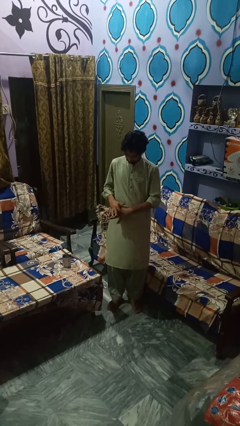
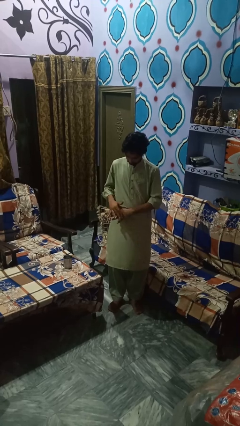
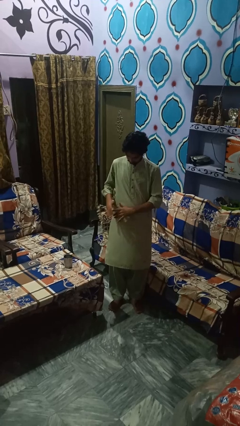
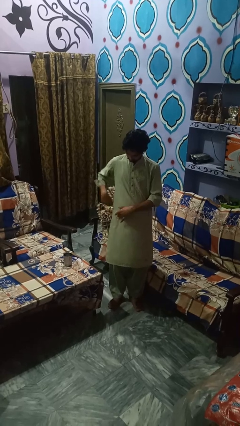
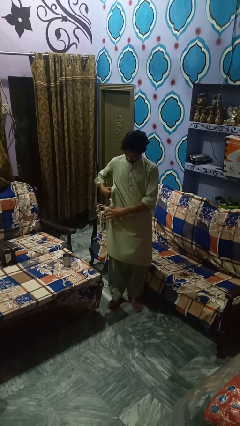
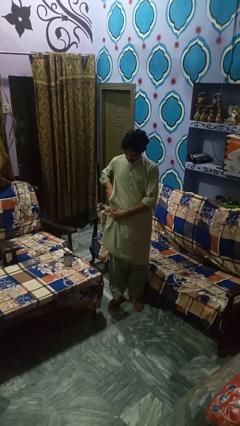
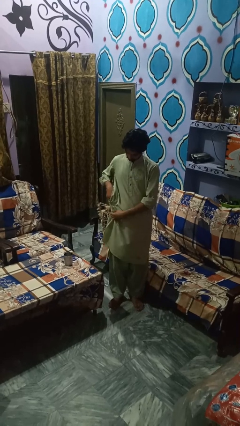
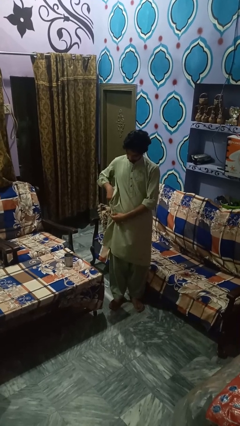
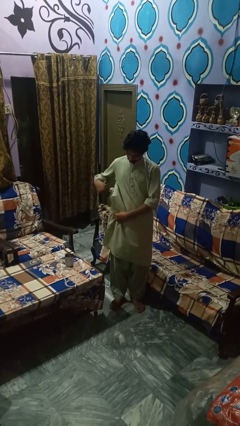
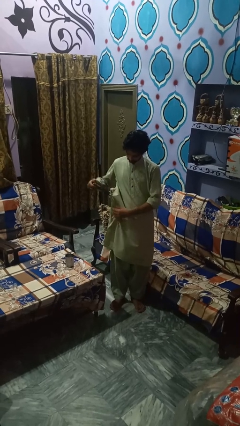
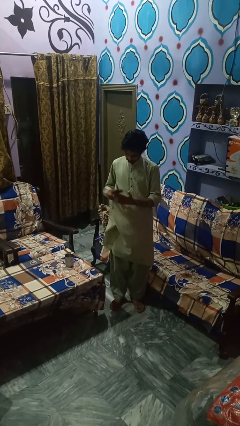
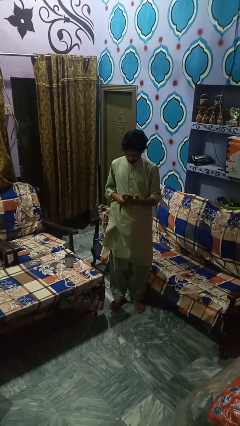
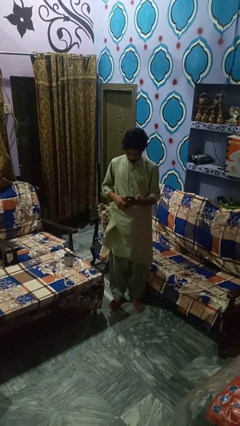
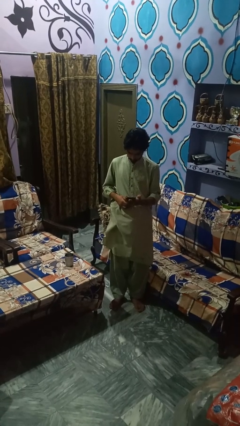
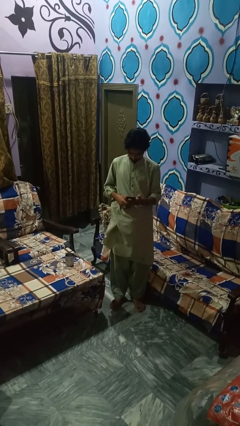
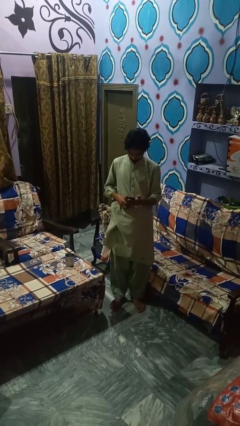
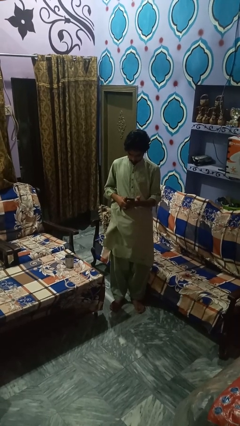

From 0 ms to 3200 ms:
person takes phone from pocket

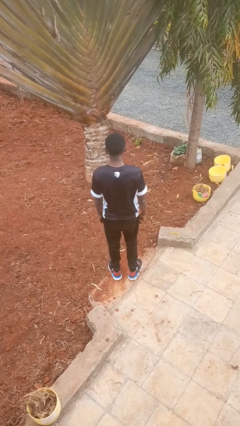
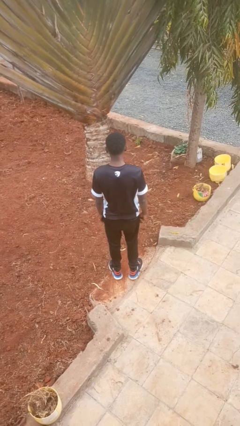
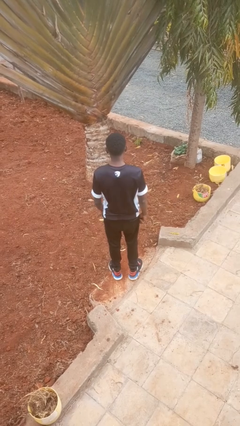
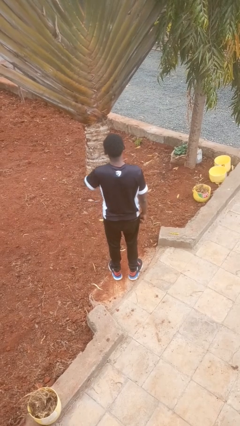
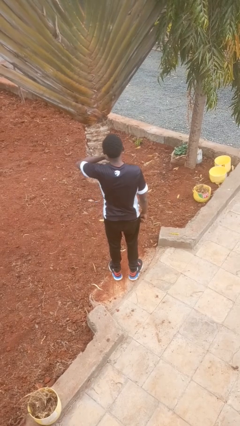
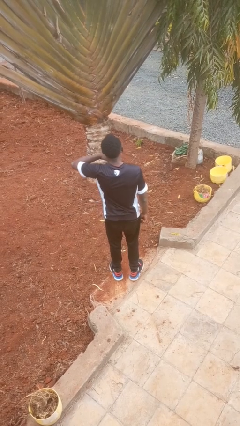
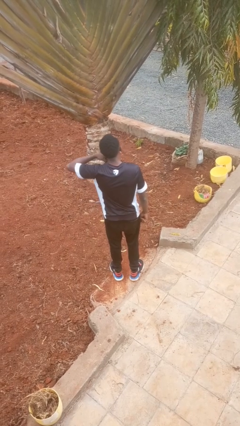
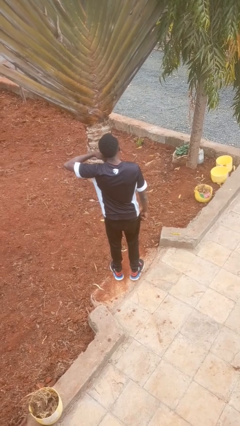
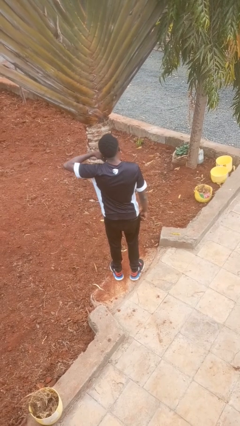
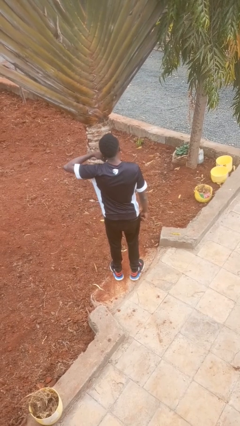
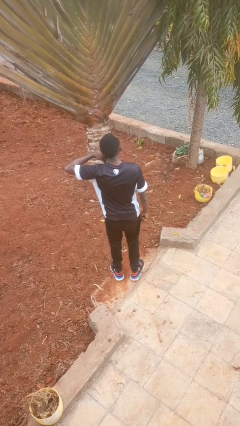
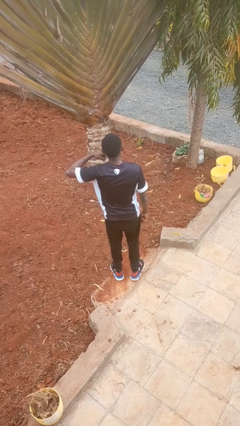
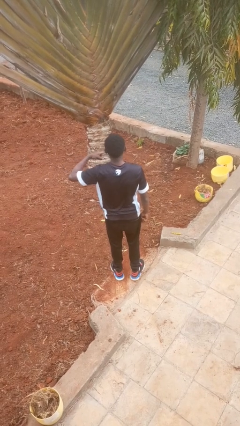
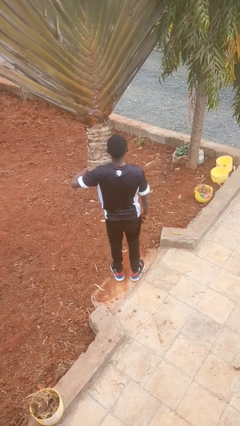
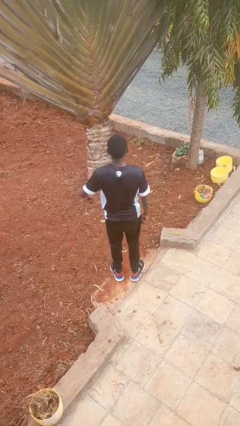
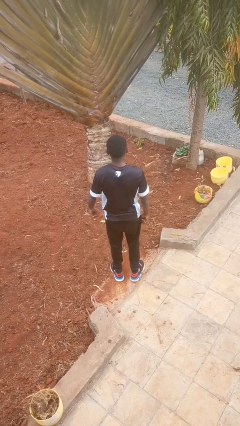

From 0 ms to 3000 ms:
person gestures cut

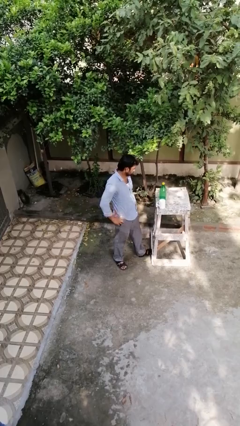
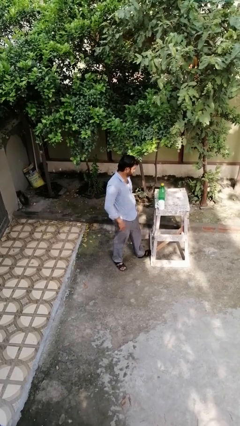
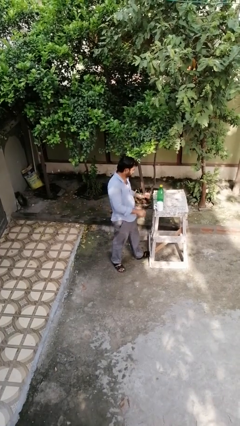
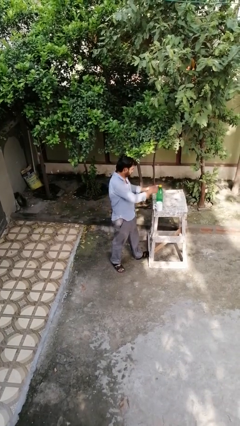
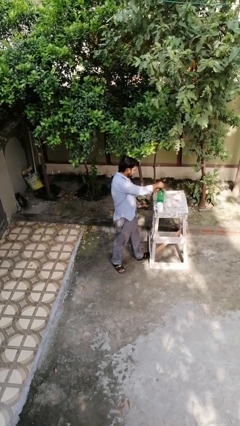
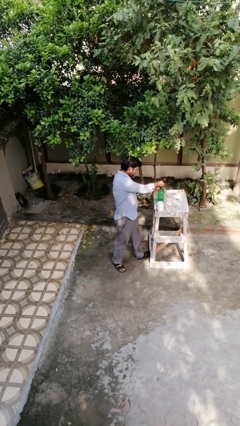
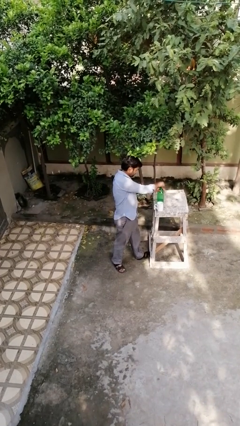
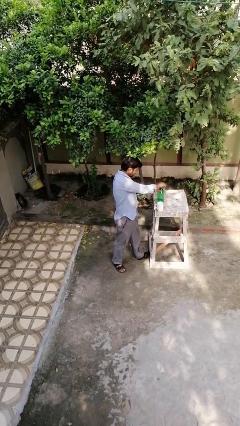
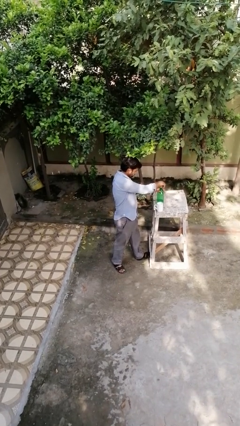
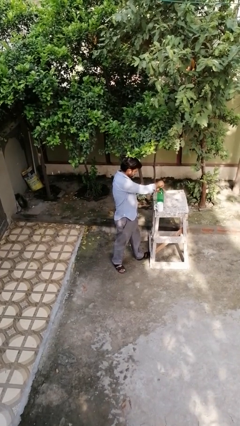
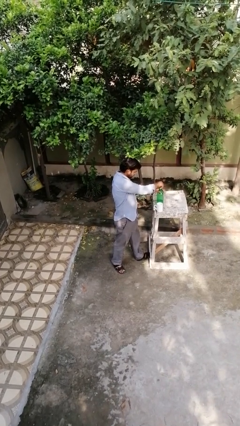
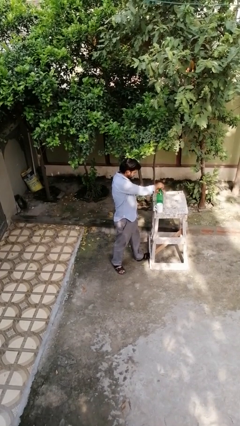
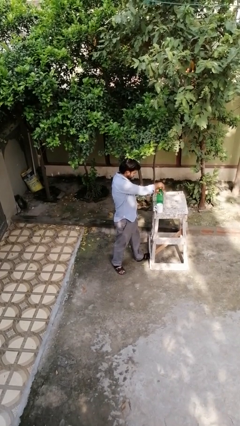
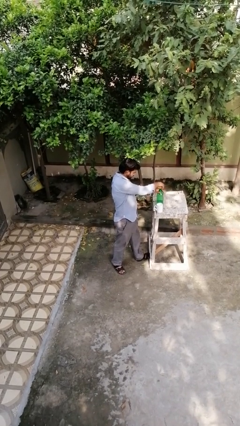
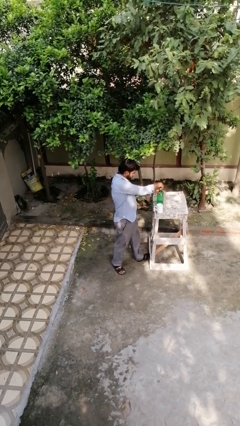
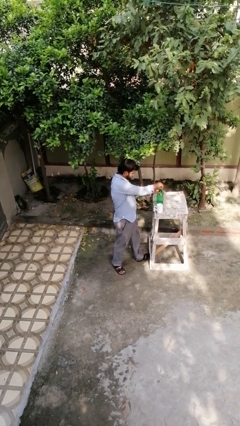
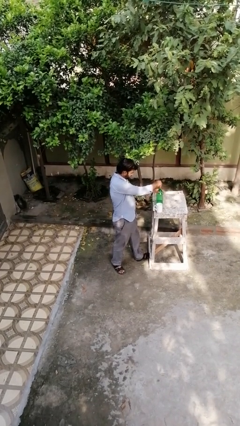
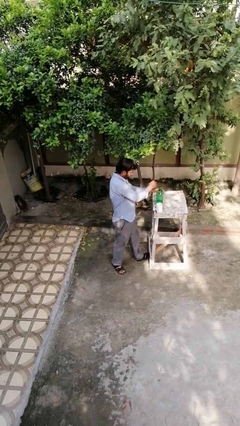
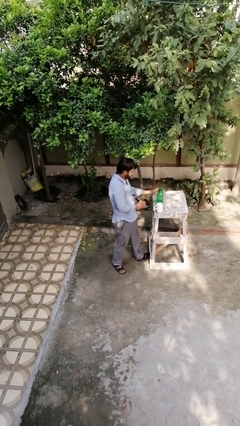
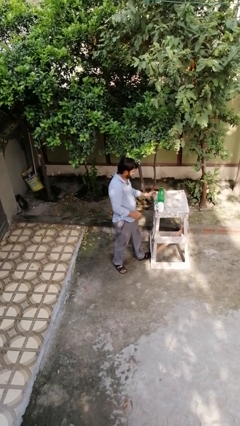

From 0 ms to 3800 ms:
person unscrews lid from bottle

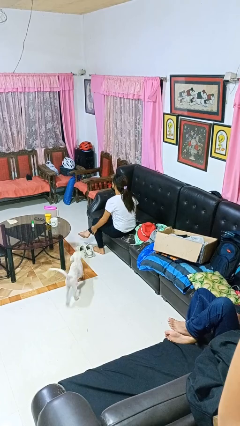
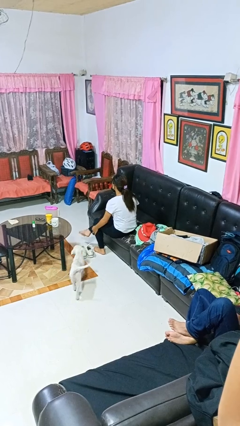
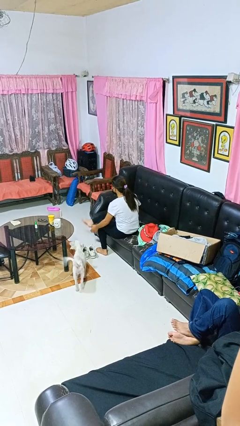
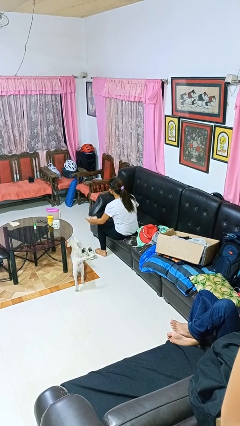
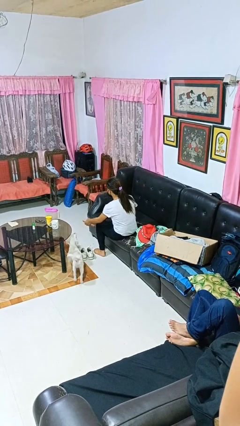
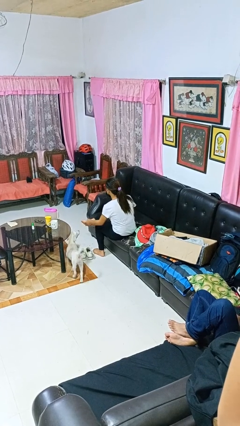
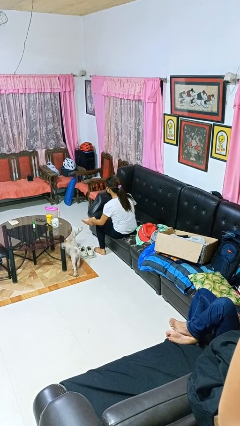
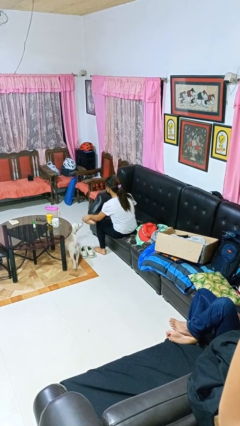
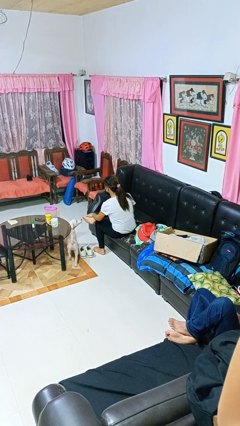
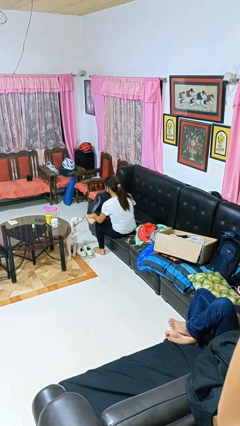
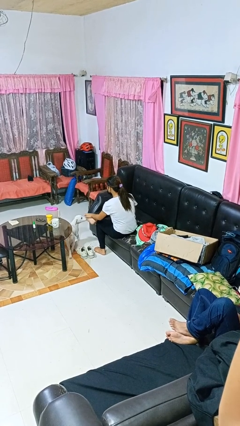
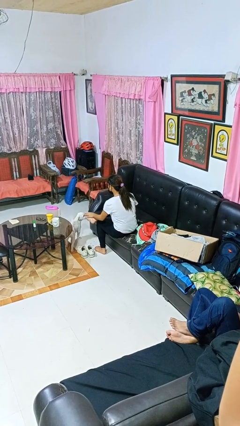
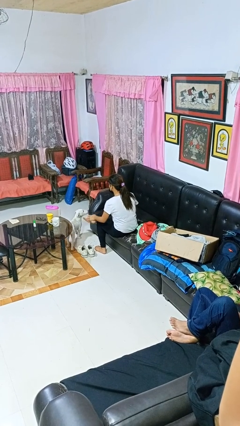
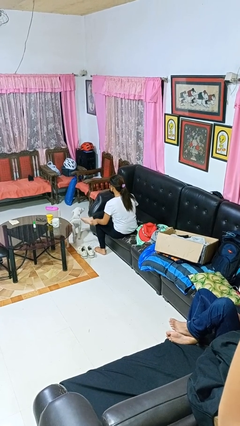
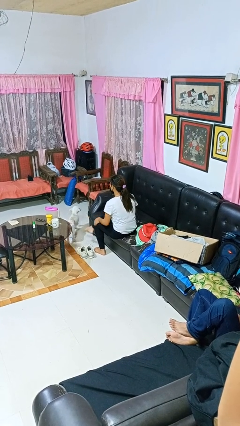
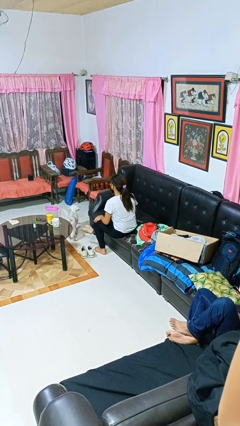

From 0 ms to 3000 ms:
person rubs foot

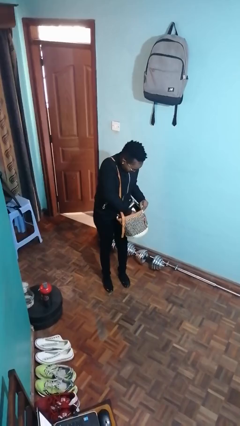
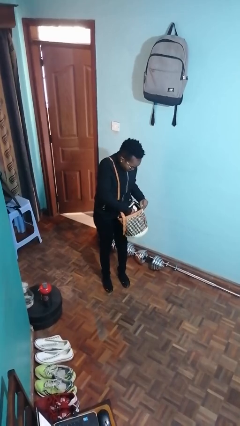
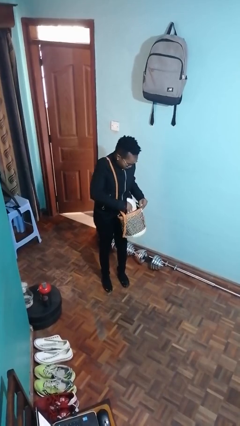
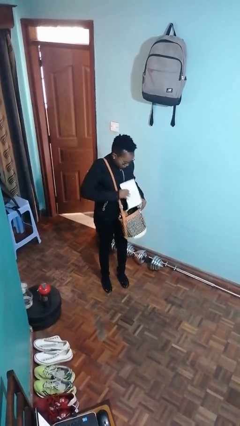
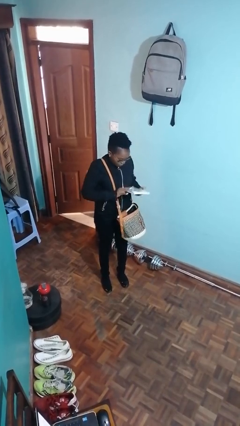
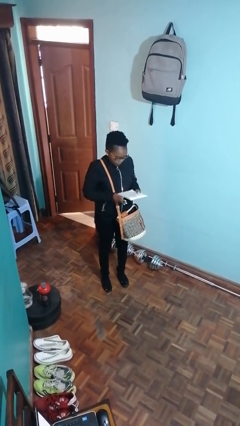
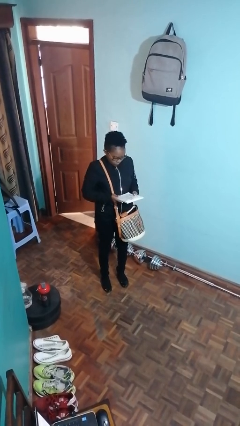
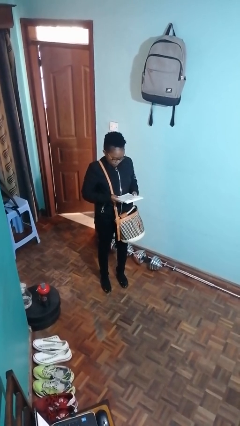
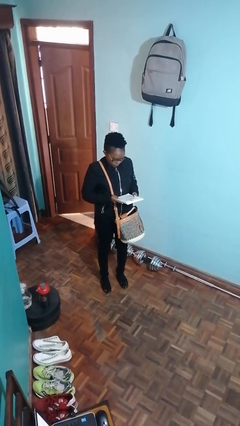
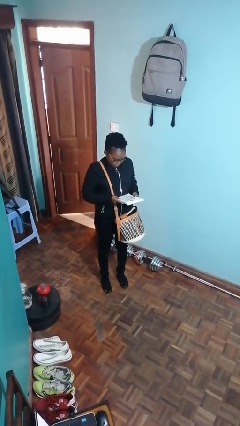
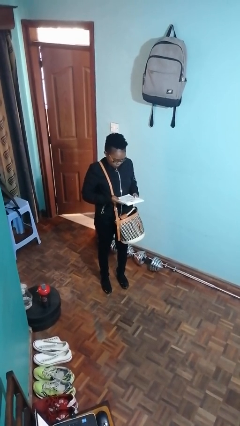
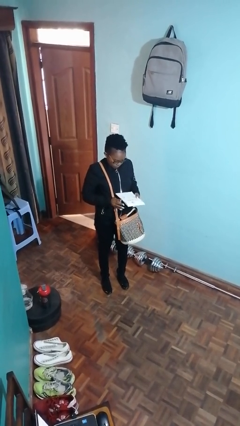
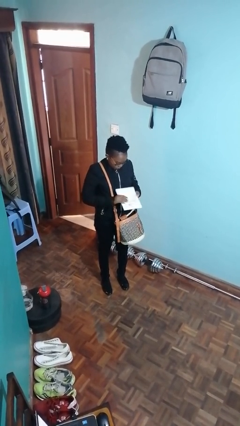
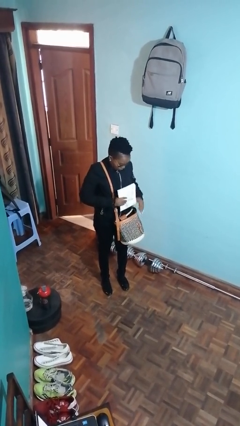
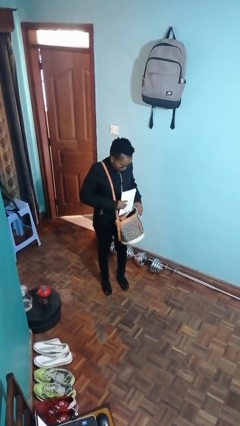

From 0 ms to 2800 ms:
person takes object from purse

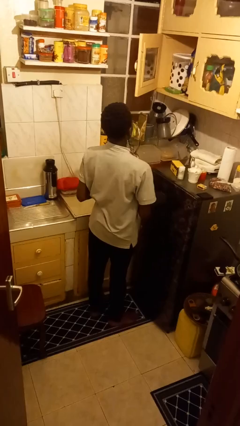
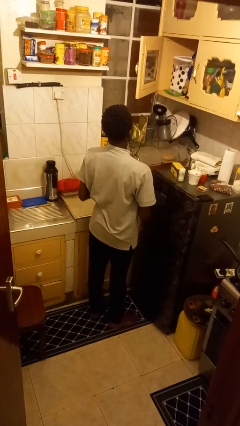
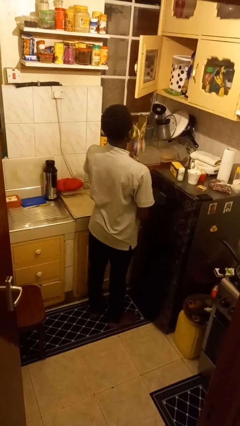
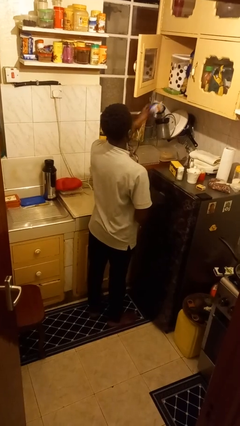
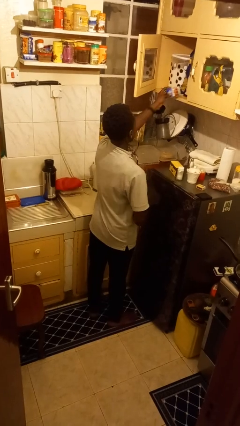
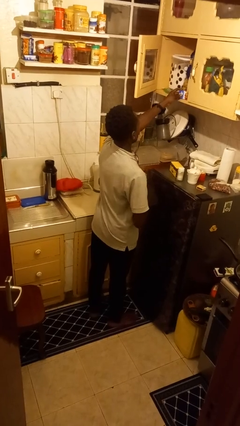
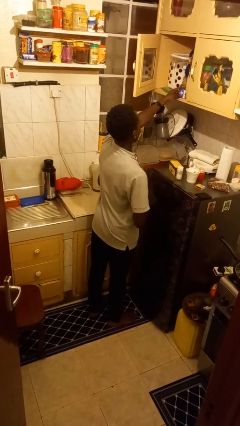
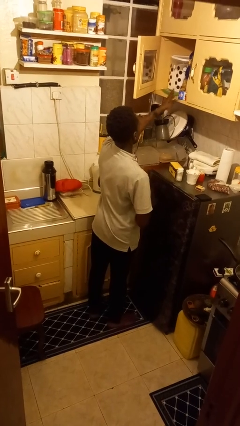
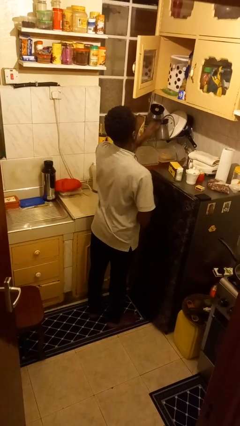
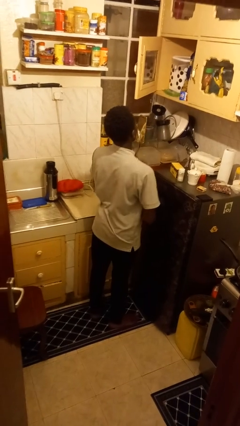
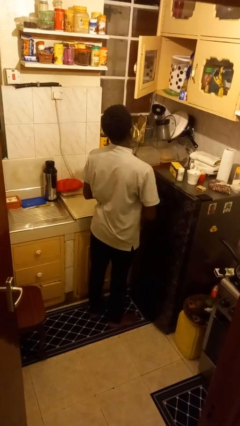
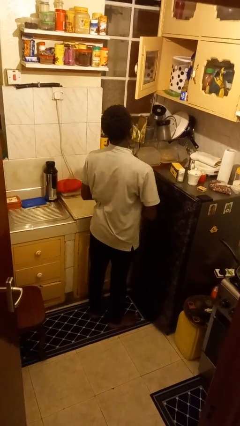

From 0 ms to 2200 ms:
person puts down object into cabinet
